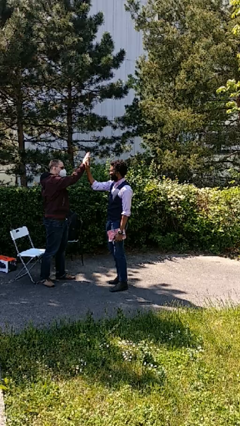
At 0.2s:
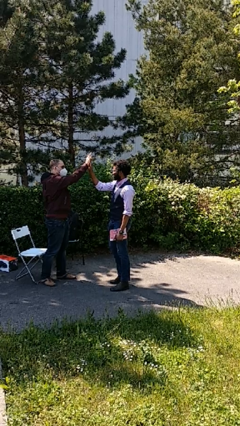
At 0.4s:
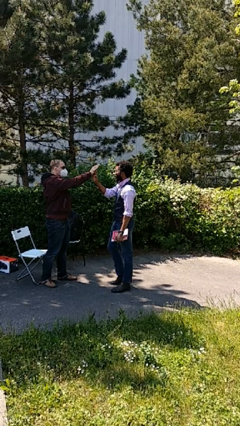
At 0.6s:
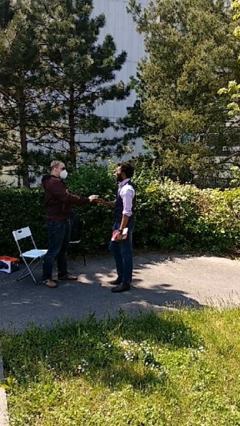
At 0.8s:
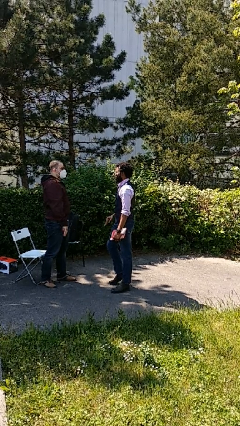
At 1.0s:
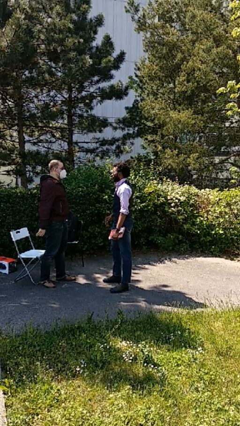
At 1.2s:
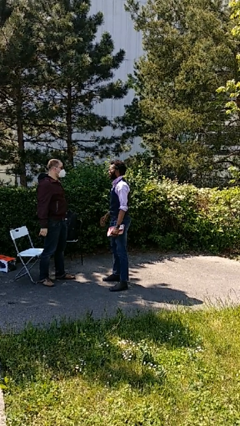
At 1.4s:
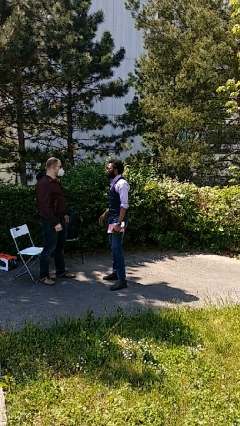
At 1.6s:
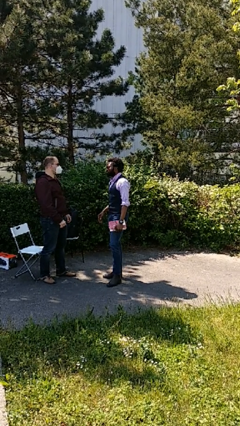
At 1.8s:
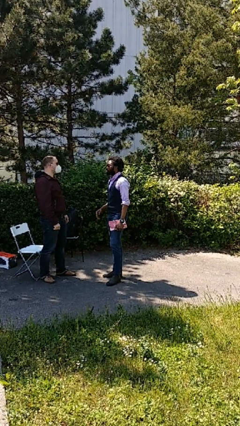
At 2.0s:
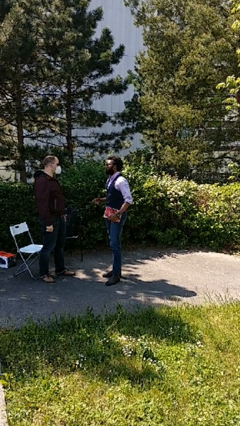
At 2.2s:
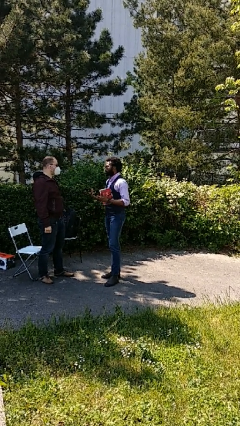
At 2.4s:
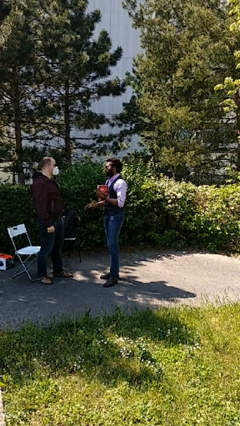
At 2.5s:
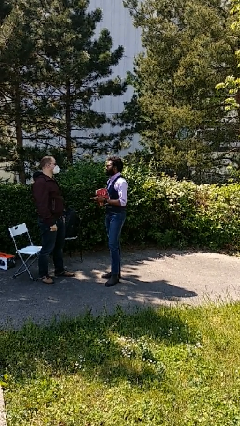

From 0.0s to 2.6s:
person highfives hand

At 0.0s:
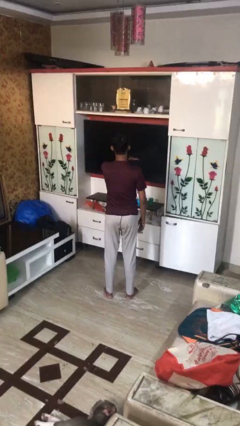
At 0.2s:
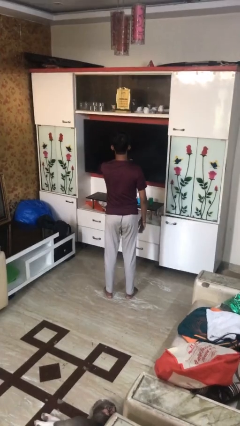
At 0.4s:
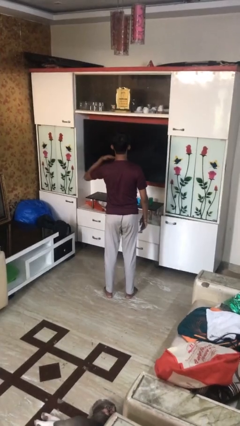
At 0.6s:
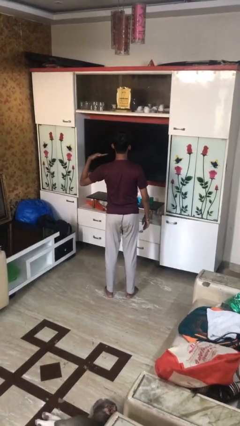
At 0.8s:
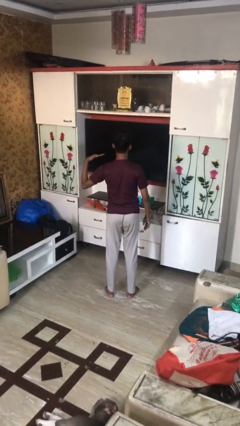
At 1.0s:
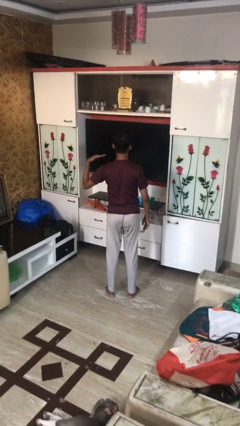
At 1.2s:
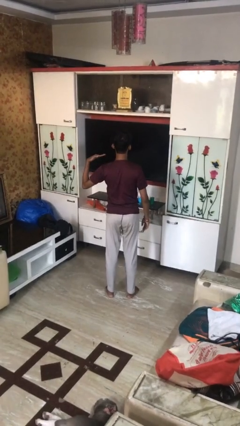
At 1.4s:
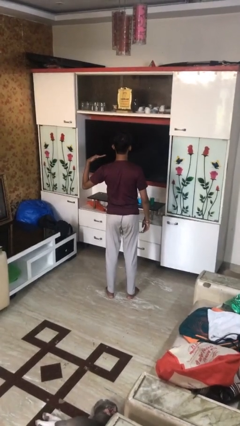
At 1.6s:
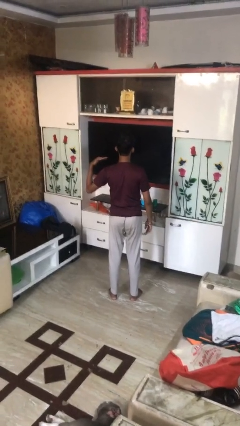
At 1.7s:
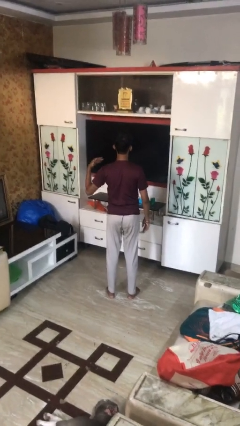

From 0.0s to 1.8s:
person gestures cut

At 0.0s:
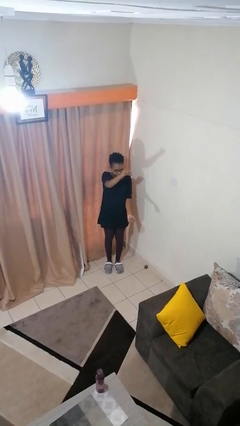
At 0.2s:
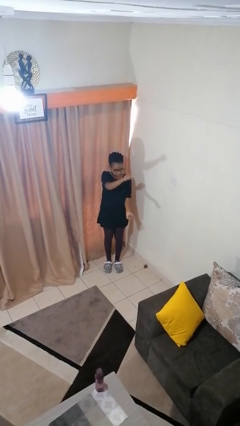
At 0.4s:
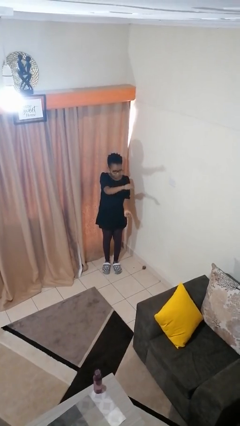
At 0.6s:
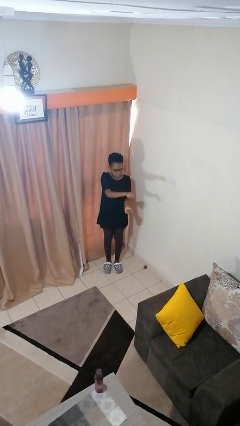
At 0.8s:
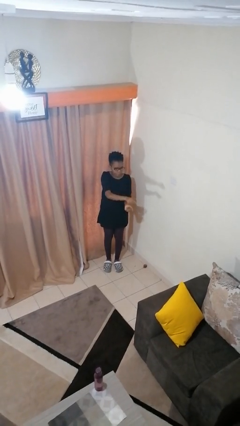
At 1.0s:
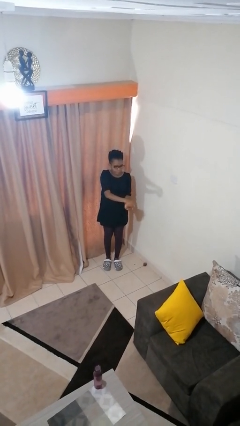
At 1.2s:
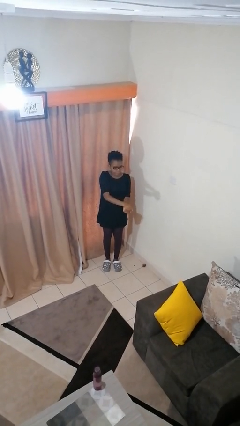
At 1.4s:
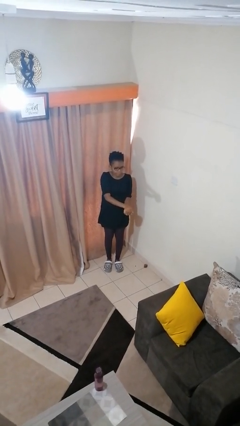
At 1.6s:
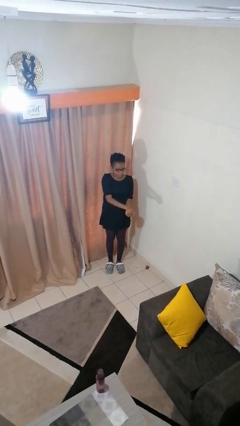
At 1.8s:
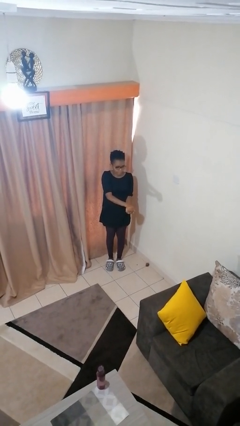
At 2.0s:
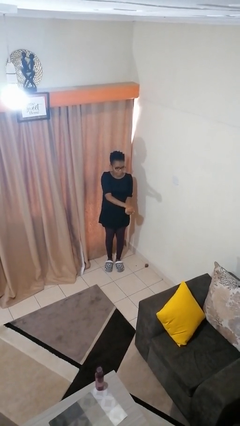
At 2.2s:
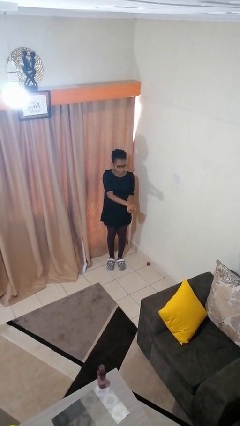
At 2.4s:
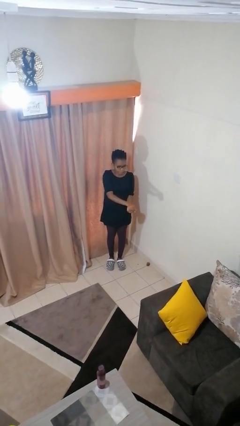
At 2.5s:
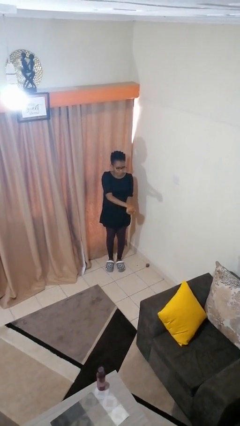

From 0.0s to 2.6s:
person gestures zoom out

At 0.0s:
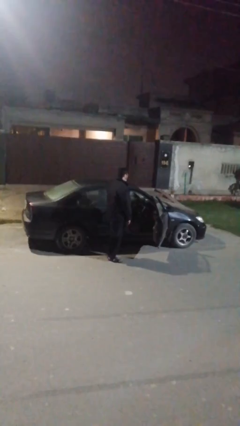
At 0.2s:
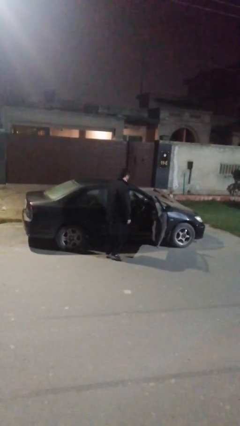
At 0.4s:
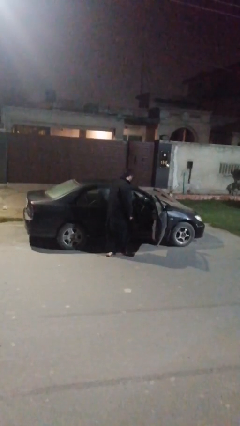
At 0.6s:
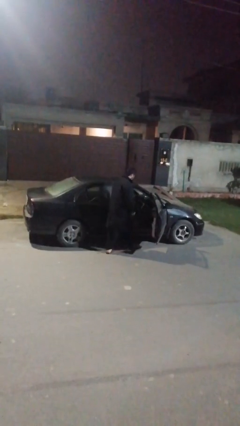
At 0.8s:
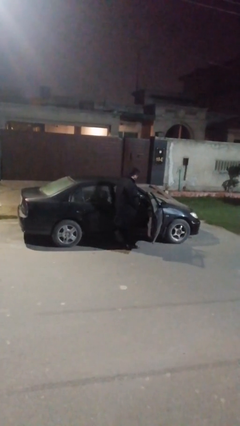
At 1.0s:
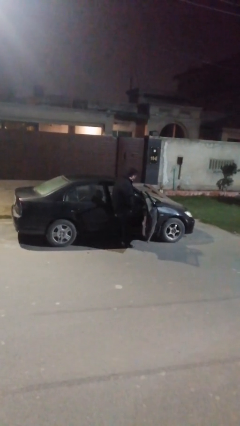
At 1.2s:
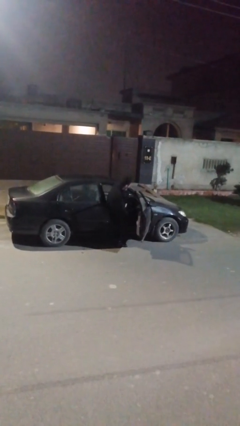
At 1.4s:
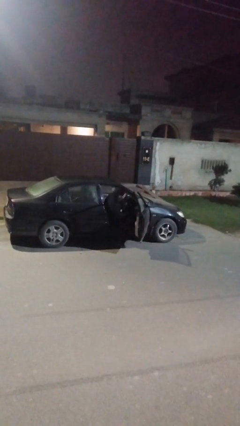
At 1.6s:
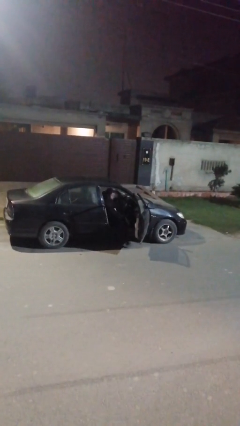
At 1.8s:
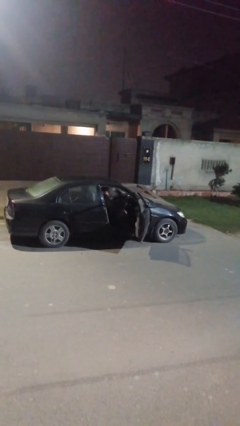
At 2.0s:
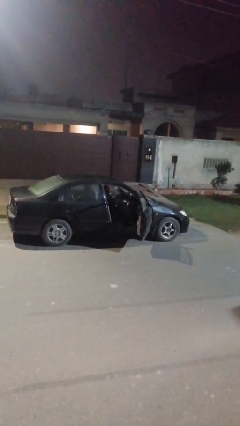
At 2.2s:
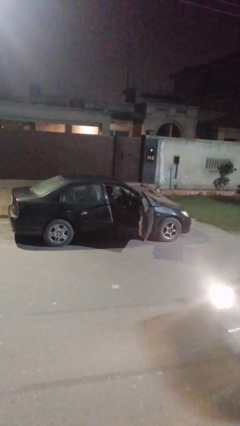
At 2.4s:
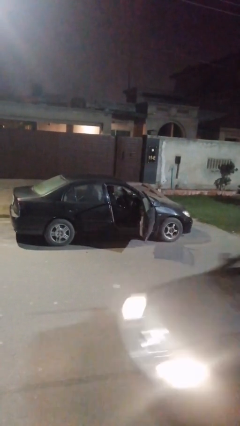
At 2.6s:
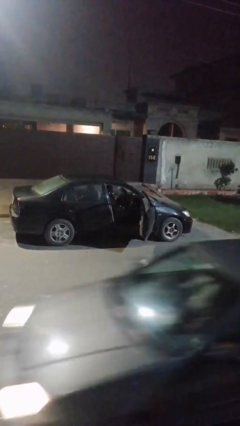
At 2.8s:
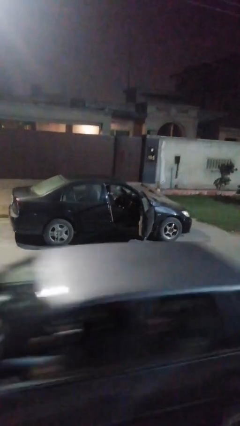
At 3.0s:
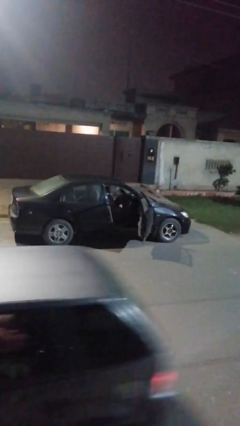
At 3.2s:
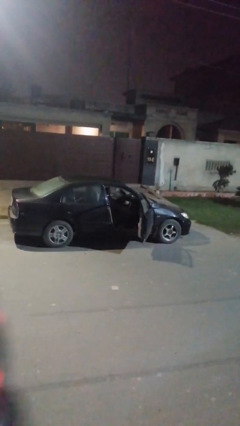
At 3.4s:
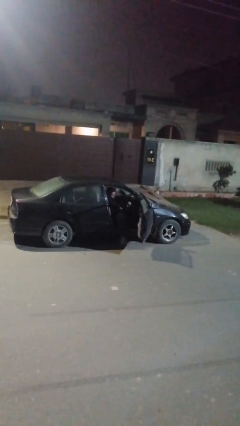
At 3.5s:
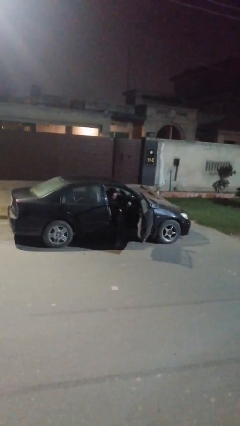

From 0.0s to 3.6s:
person enters car

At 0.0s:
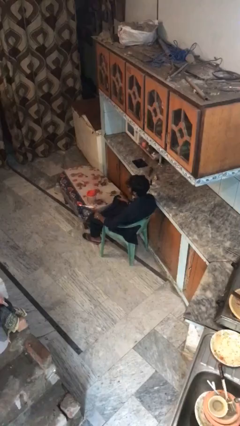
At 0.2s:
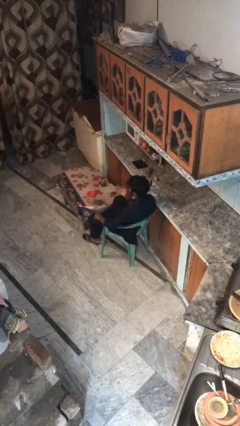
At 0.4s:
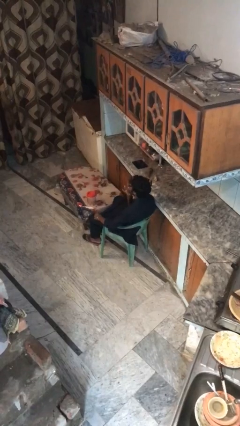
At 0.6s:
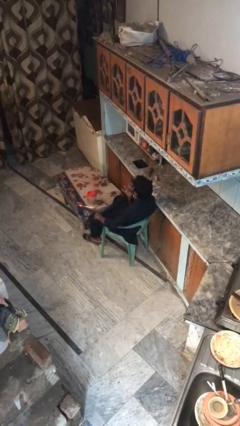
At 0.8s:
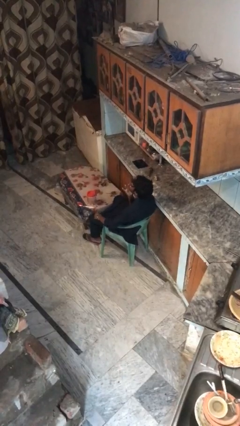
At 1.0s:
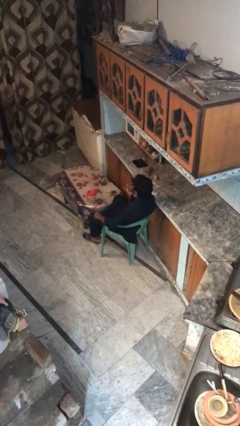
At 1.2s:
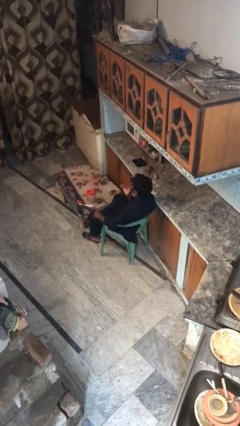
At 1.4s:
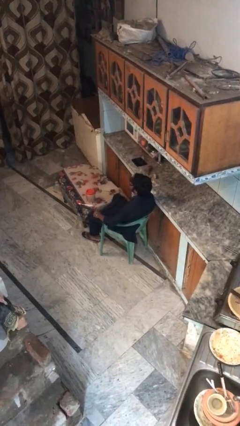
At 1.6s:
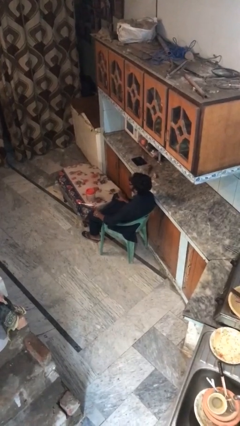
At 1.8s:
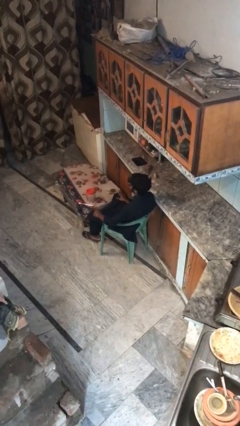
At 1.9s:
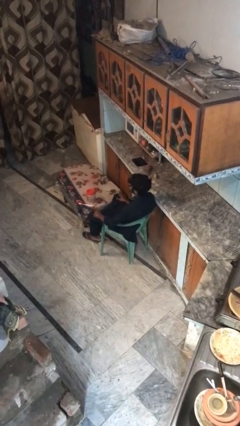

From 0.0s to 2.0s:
person licks fingers

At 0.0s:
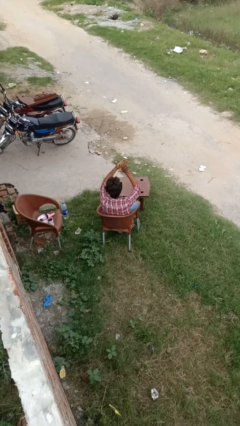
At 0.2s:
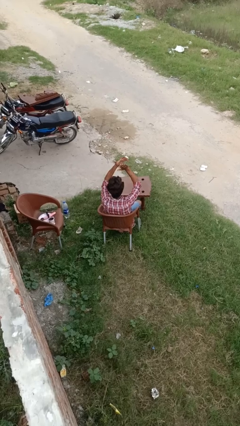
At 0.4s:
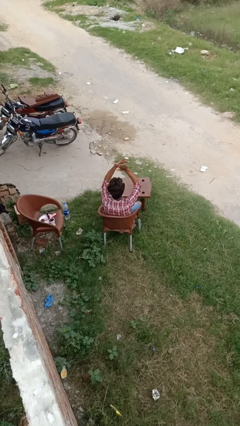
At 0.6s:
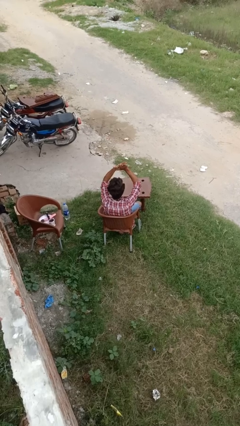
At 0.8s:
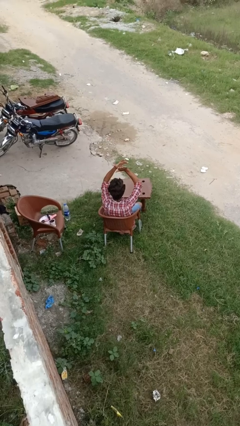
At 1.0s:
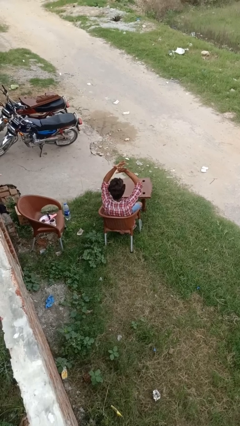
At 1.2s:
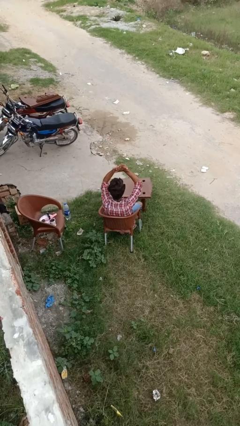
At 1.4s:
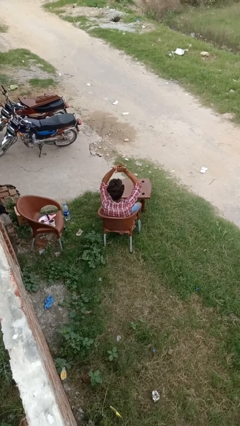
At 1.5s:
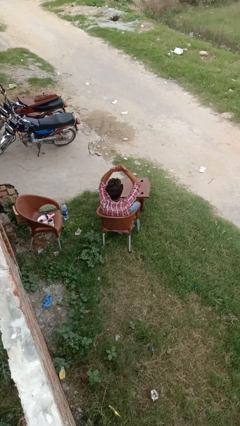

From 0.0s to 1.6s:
person claps hands

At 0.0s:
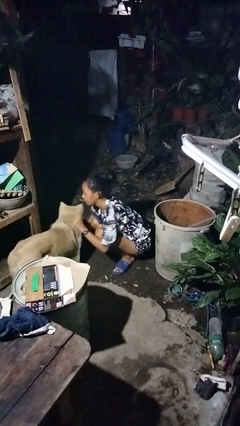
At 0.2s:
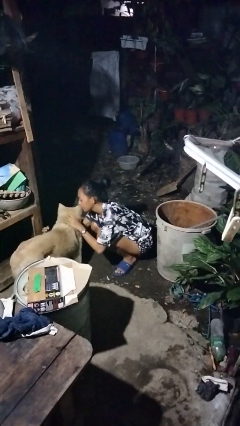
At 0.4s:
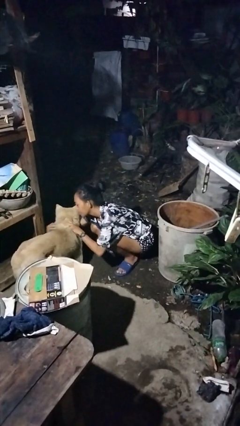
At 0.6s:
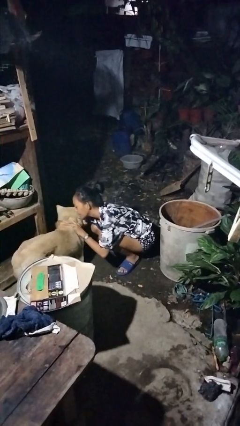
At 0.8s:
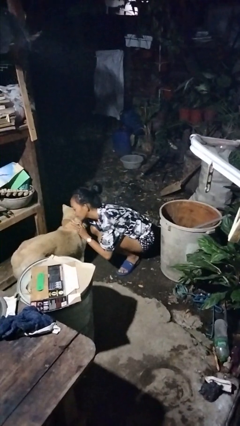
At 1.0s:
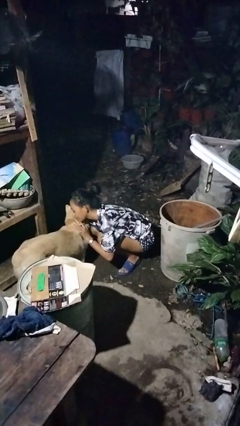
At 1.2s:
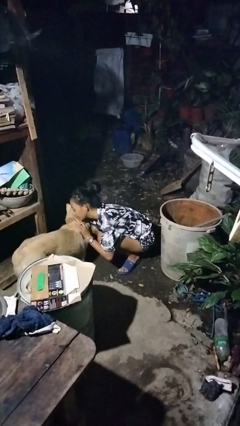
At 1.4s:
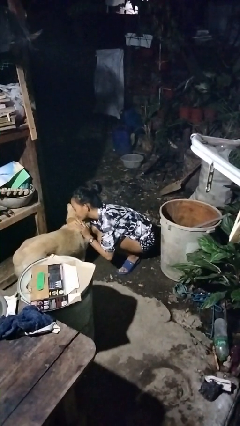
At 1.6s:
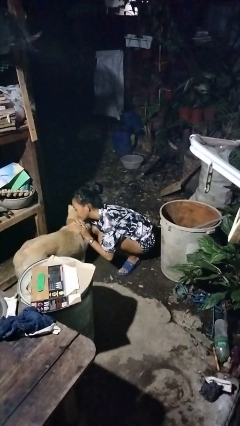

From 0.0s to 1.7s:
person hugs dog

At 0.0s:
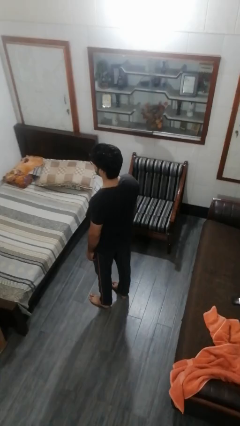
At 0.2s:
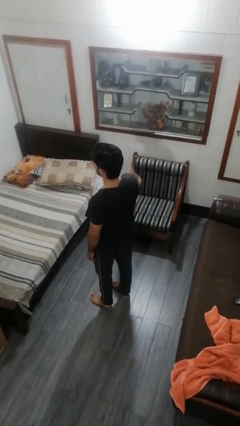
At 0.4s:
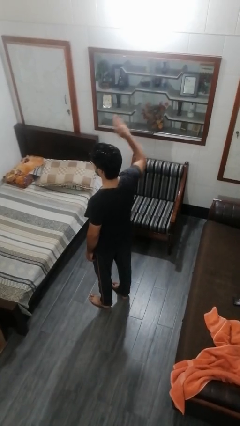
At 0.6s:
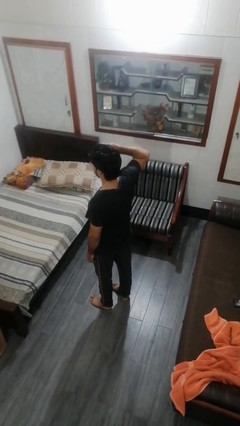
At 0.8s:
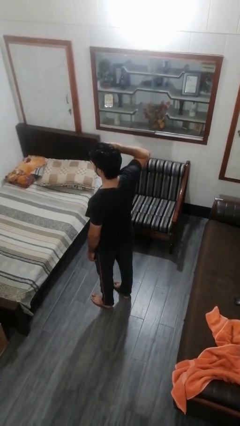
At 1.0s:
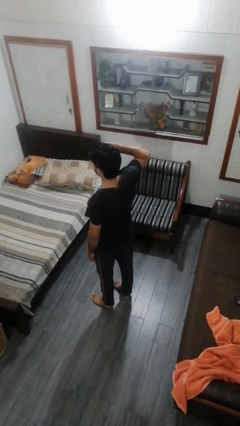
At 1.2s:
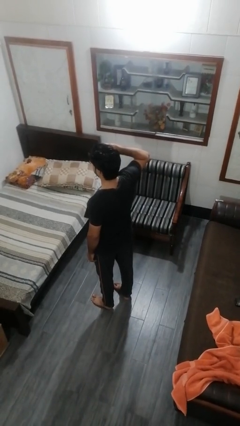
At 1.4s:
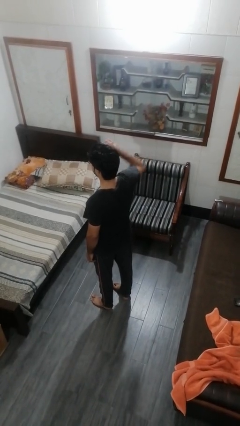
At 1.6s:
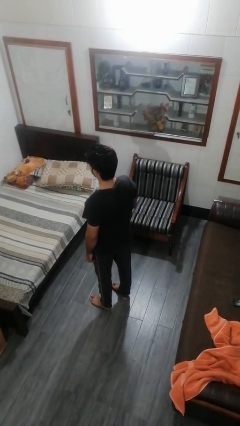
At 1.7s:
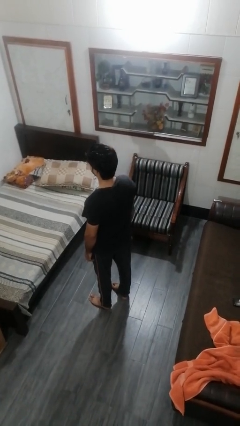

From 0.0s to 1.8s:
person salutes
